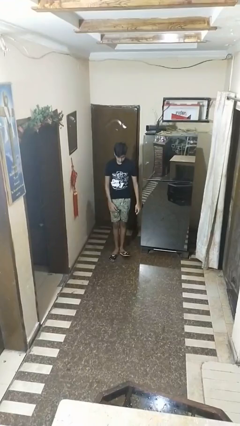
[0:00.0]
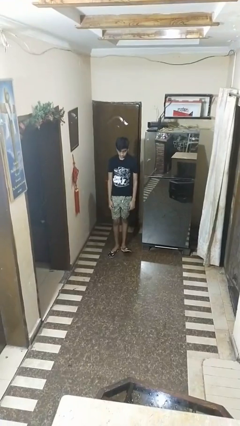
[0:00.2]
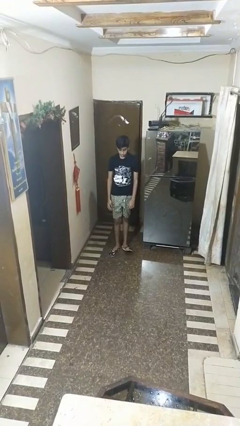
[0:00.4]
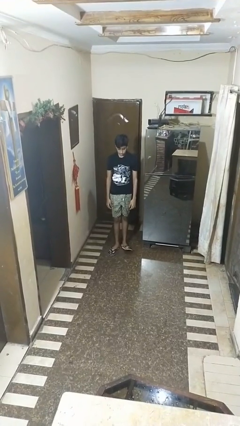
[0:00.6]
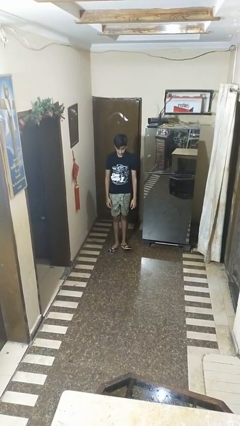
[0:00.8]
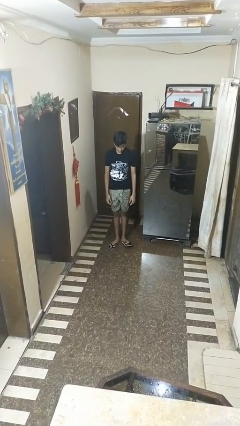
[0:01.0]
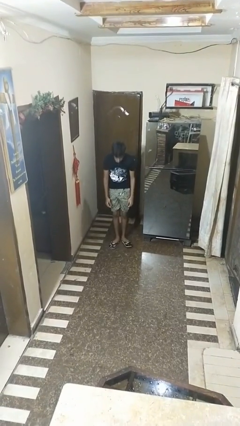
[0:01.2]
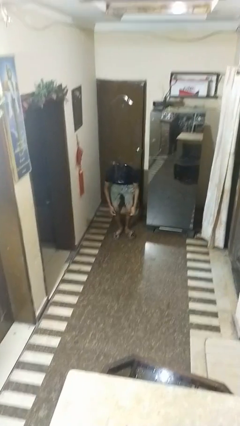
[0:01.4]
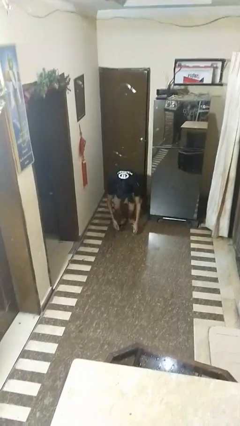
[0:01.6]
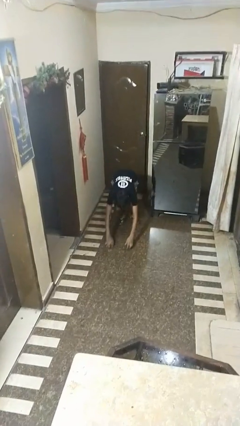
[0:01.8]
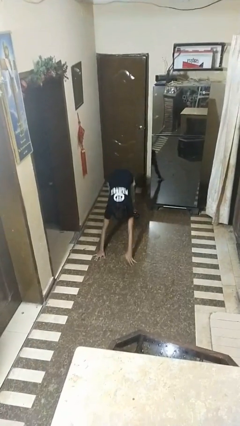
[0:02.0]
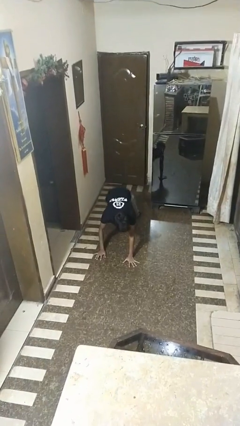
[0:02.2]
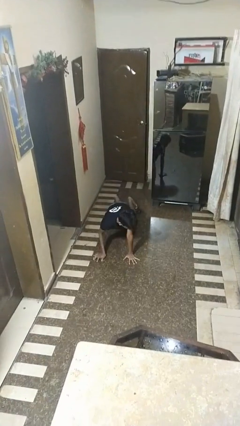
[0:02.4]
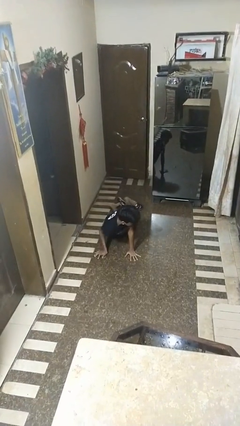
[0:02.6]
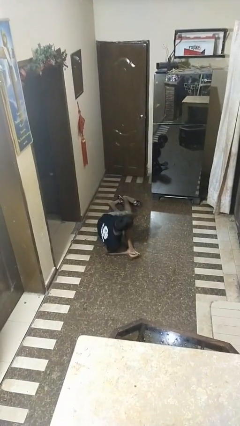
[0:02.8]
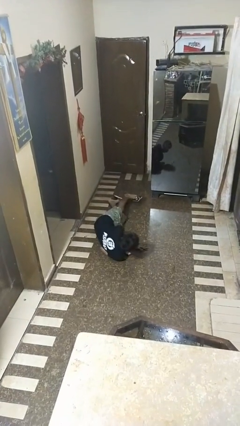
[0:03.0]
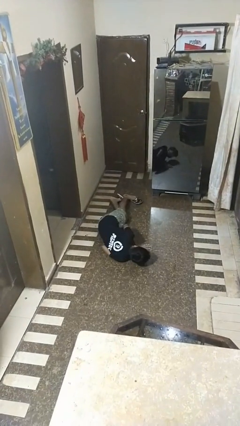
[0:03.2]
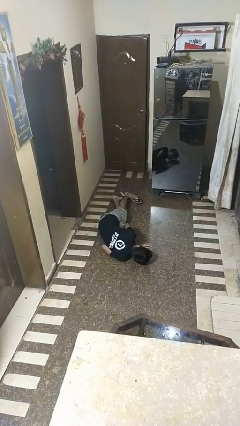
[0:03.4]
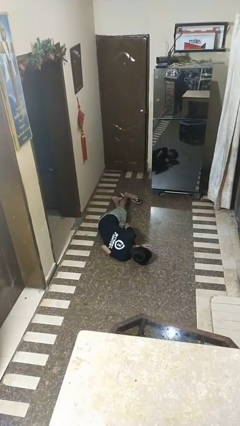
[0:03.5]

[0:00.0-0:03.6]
person falls while standing

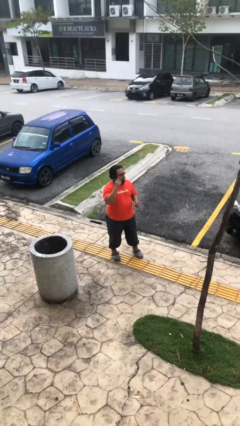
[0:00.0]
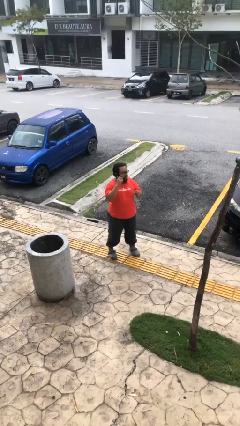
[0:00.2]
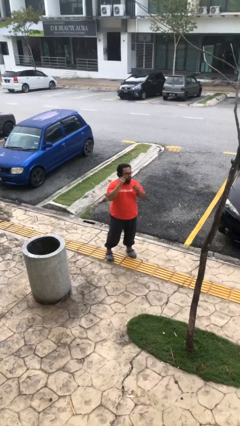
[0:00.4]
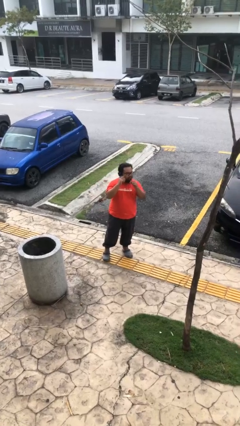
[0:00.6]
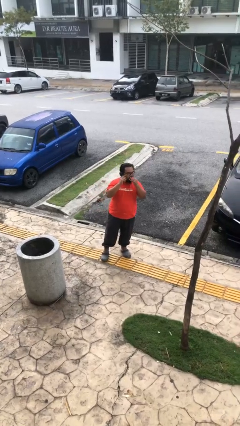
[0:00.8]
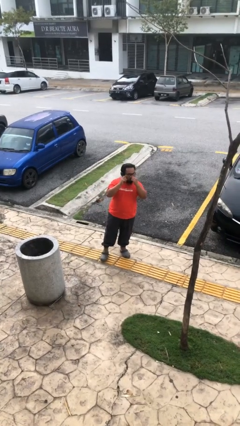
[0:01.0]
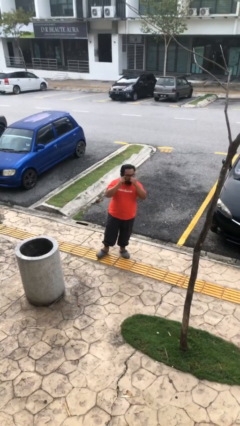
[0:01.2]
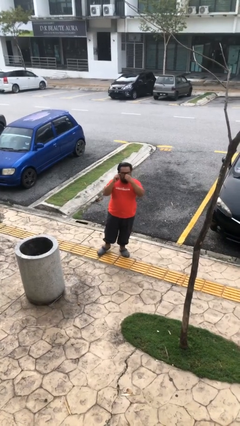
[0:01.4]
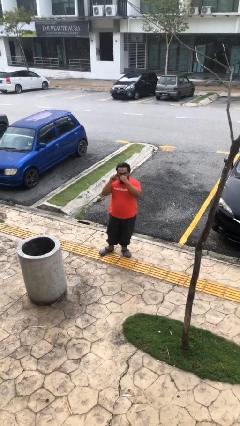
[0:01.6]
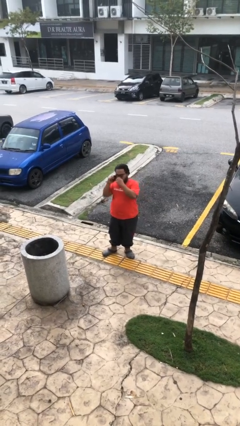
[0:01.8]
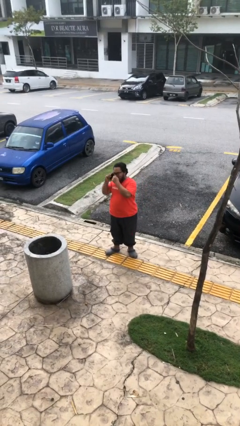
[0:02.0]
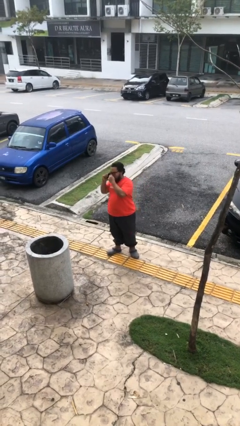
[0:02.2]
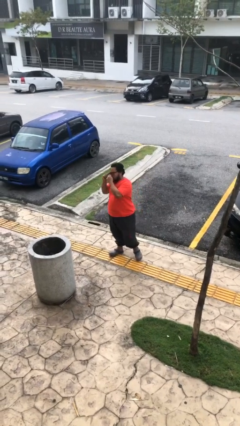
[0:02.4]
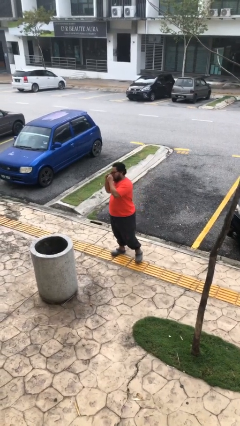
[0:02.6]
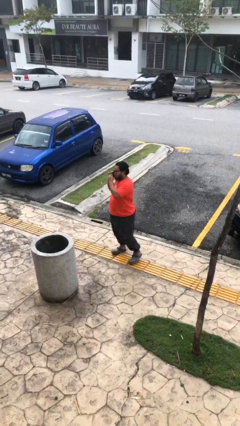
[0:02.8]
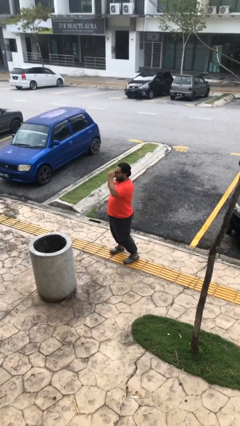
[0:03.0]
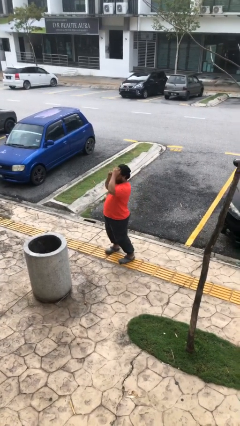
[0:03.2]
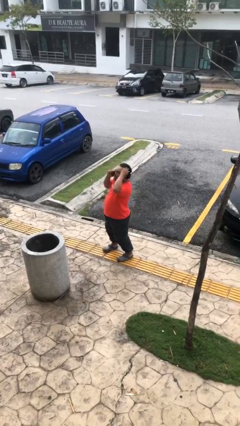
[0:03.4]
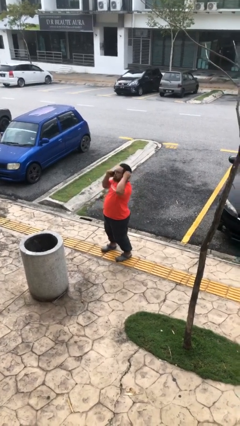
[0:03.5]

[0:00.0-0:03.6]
person talks on phone

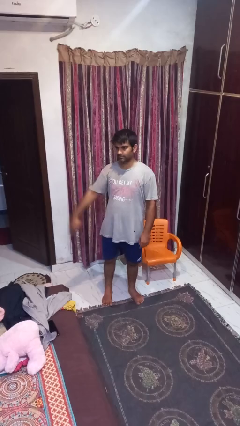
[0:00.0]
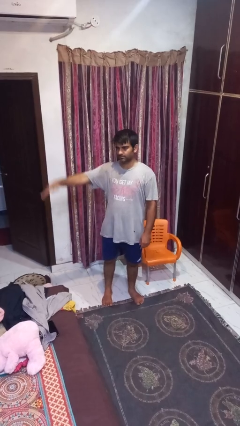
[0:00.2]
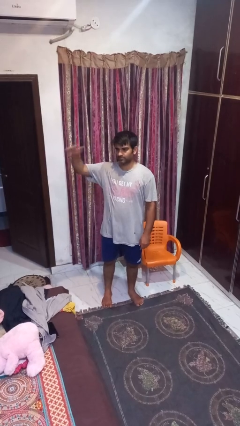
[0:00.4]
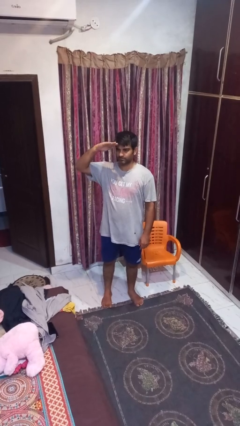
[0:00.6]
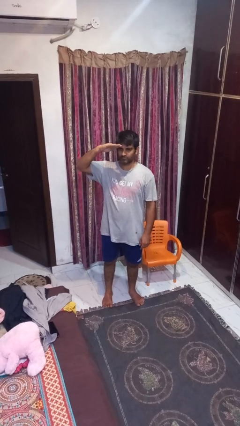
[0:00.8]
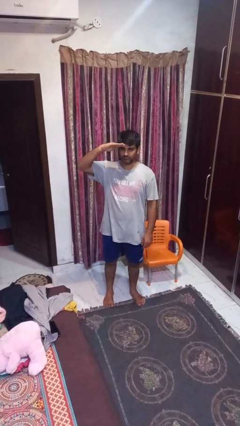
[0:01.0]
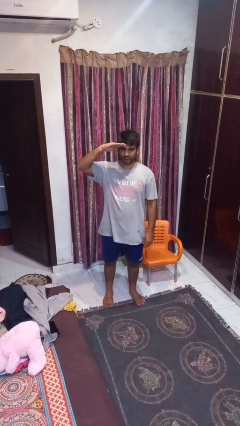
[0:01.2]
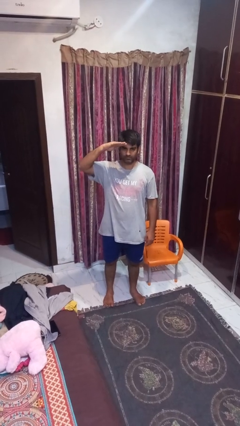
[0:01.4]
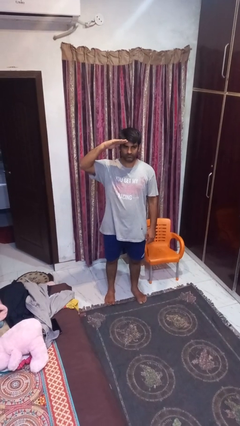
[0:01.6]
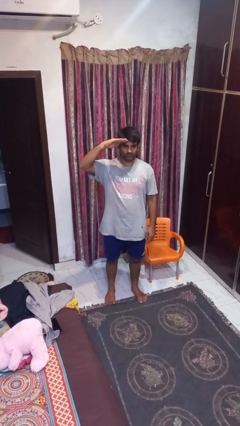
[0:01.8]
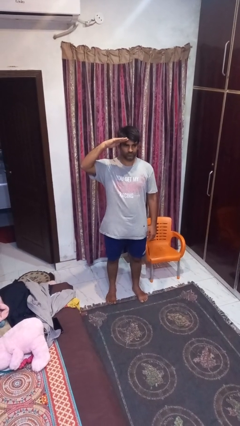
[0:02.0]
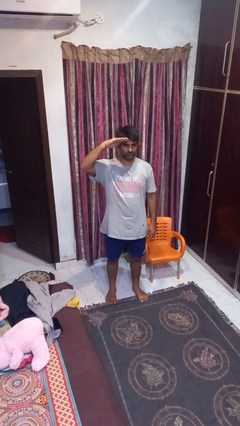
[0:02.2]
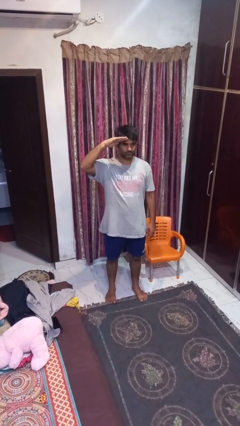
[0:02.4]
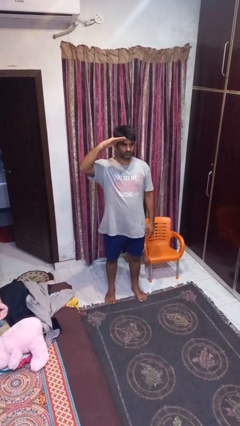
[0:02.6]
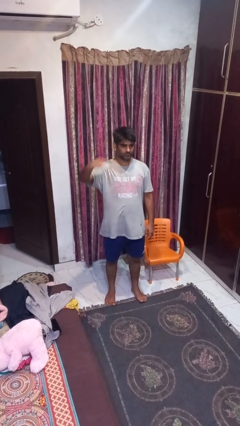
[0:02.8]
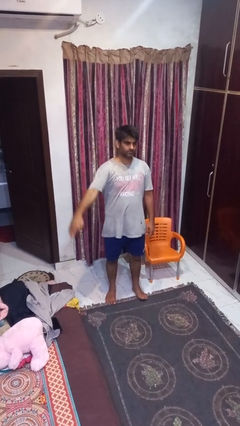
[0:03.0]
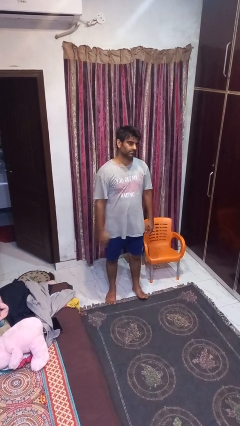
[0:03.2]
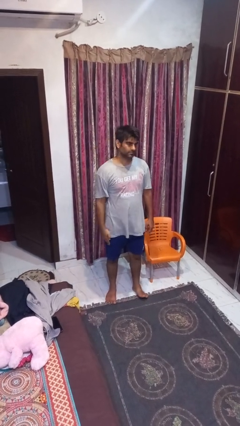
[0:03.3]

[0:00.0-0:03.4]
person salutes

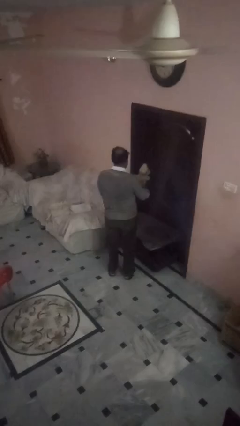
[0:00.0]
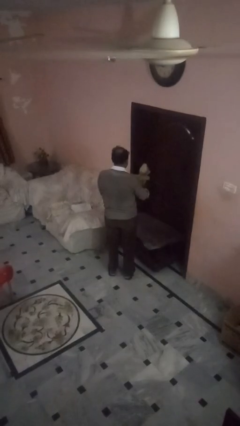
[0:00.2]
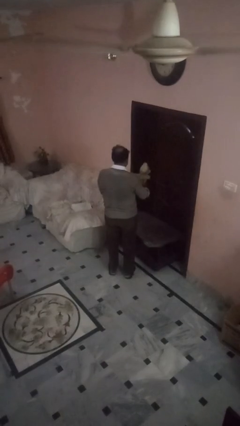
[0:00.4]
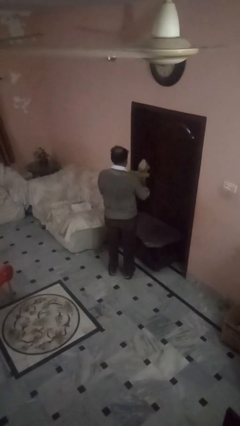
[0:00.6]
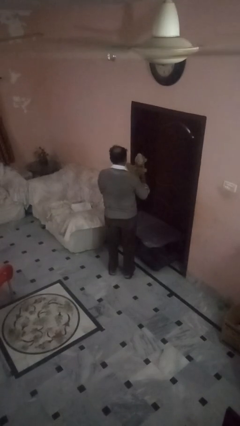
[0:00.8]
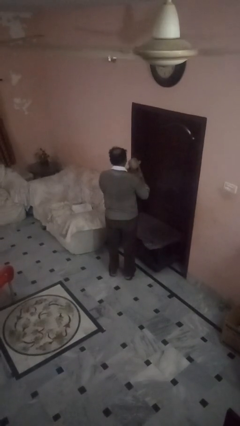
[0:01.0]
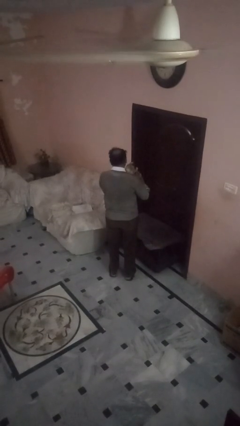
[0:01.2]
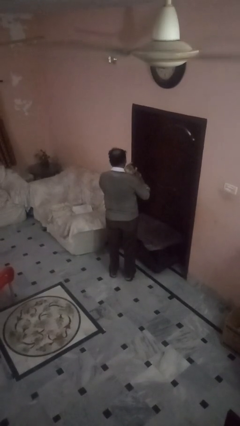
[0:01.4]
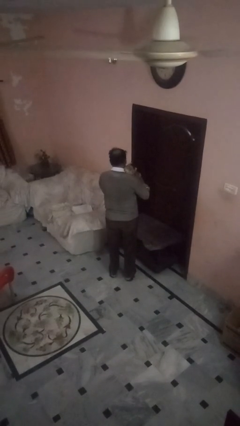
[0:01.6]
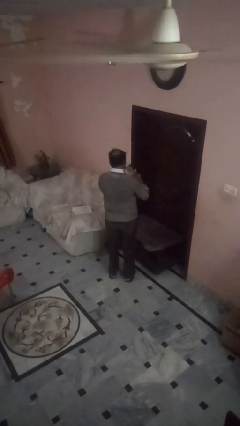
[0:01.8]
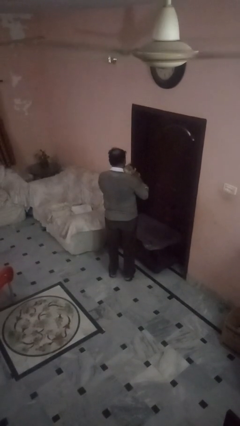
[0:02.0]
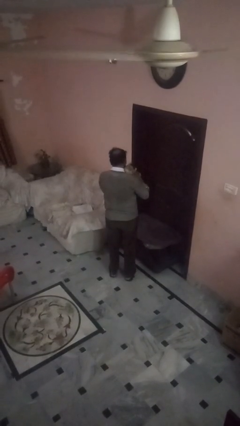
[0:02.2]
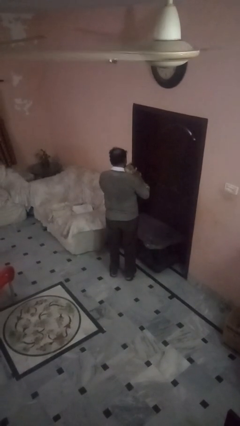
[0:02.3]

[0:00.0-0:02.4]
person hugs stuffed animal

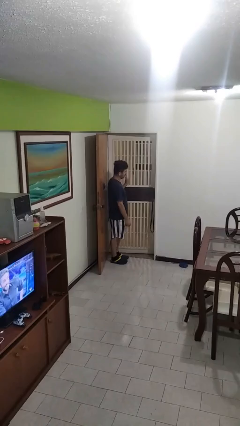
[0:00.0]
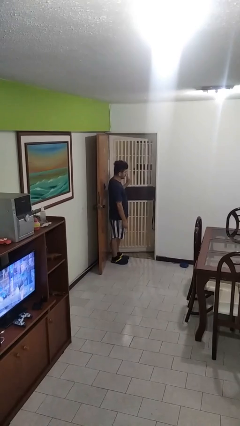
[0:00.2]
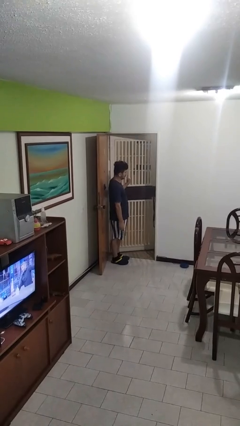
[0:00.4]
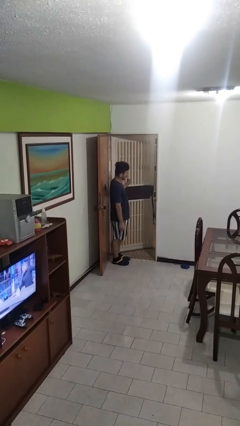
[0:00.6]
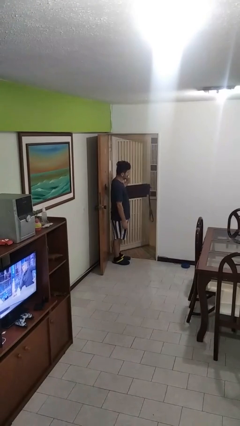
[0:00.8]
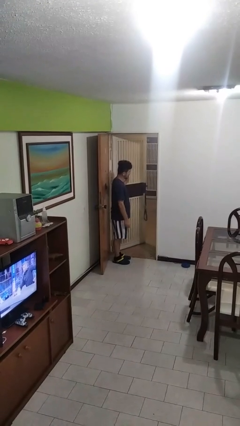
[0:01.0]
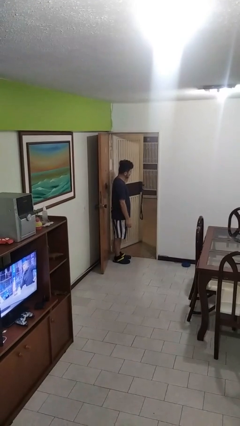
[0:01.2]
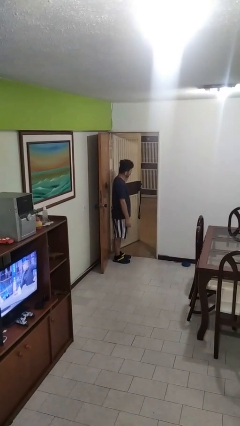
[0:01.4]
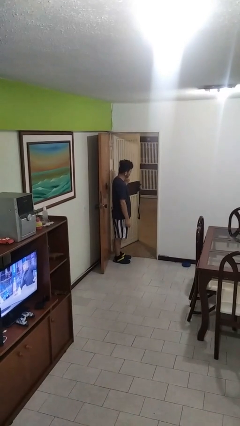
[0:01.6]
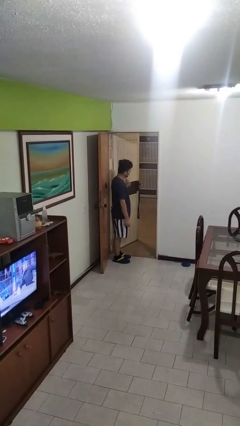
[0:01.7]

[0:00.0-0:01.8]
person opens facility door

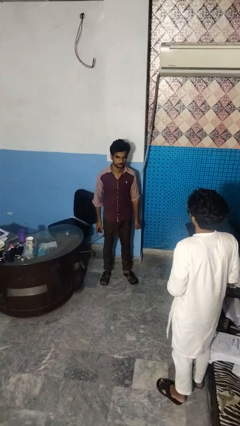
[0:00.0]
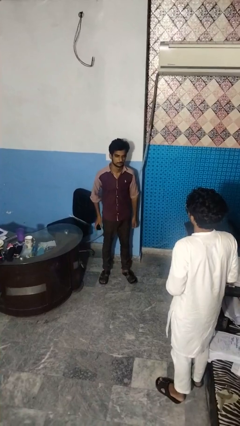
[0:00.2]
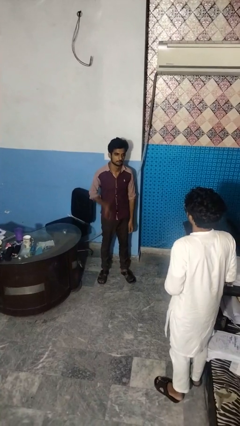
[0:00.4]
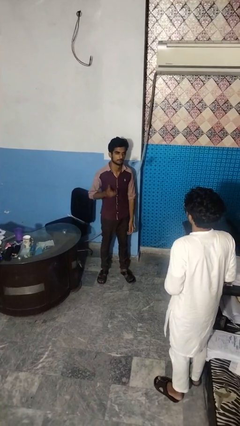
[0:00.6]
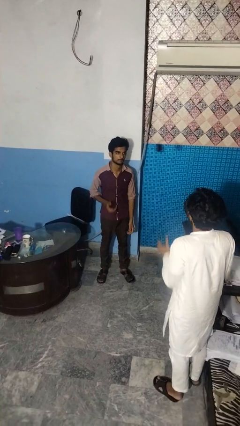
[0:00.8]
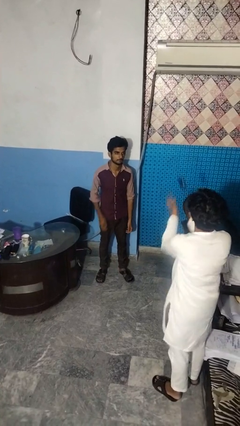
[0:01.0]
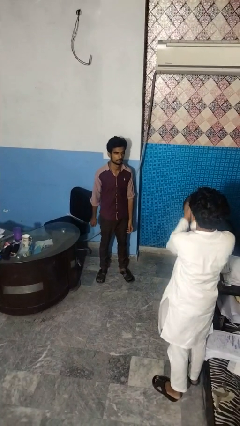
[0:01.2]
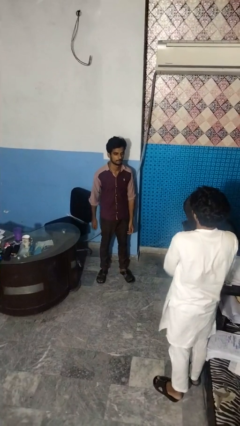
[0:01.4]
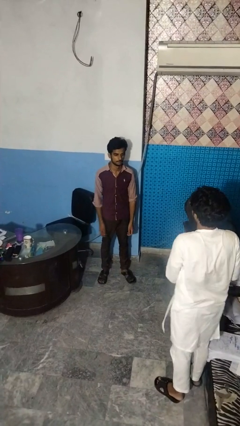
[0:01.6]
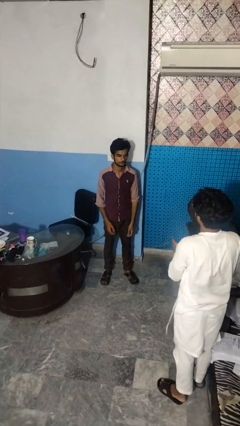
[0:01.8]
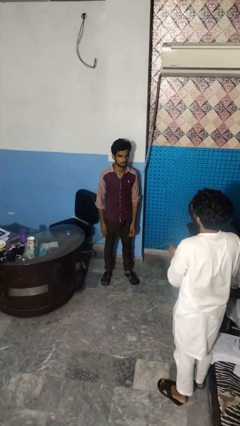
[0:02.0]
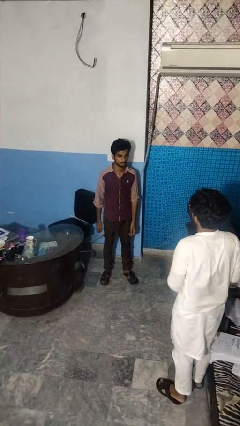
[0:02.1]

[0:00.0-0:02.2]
person throws object to person

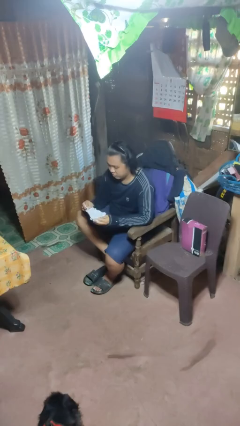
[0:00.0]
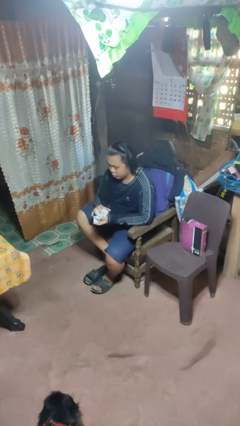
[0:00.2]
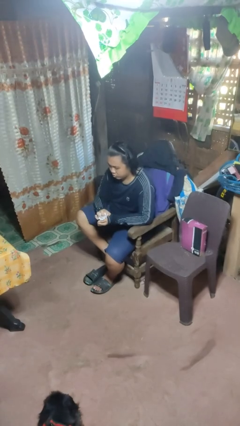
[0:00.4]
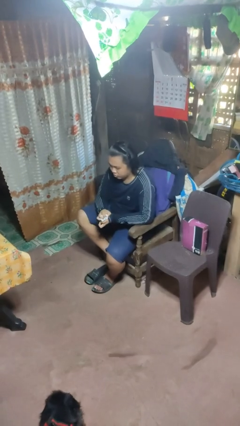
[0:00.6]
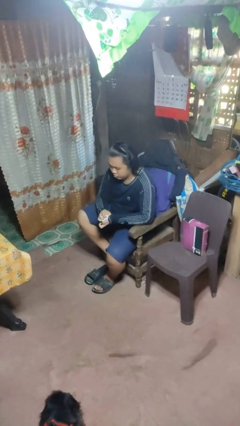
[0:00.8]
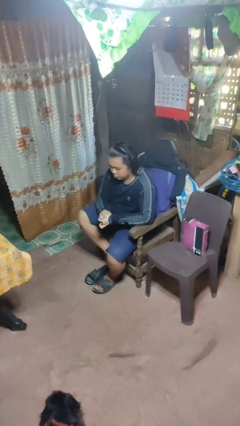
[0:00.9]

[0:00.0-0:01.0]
person crumples paper
